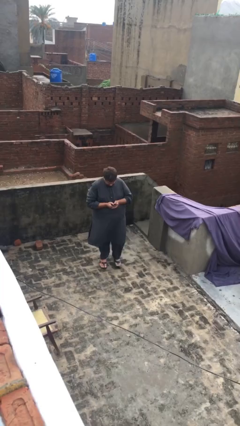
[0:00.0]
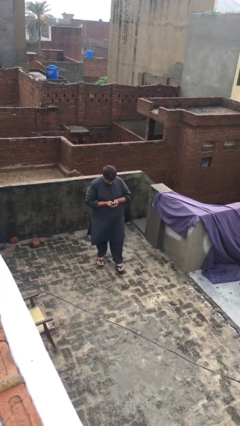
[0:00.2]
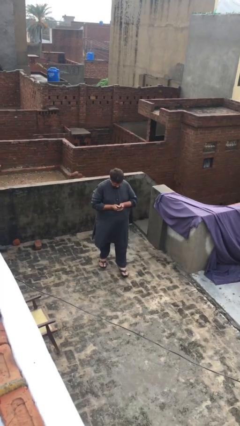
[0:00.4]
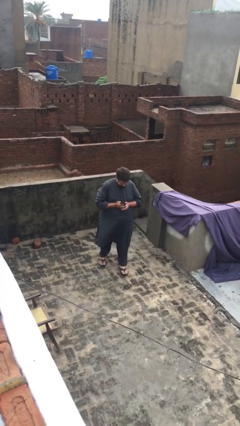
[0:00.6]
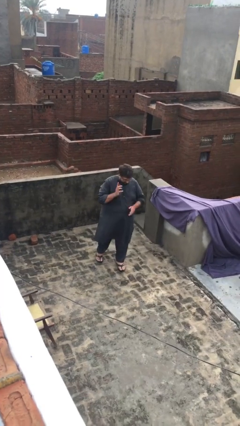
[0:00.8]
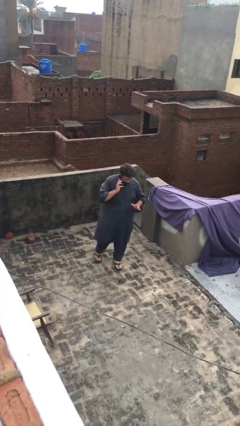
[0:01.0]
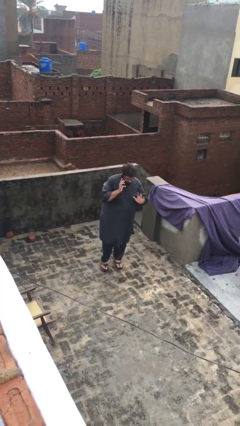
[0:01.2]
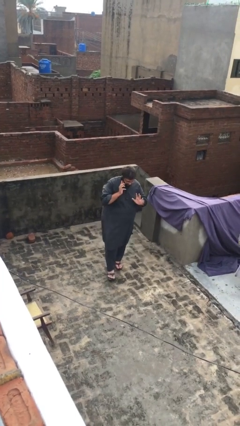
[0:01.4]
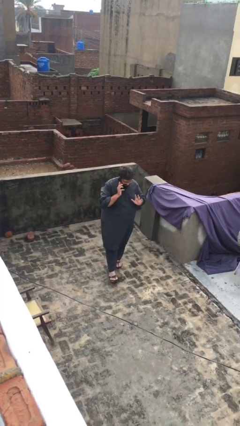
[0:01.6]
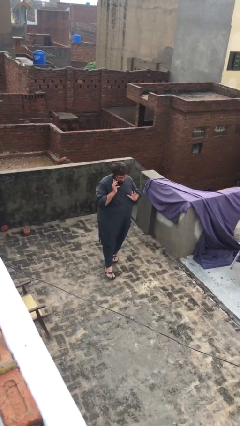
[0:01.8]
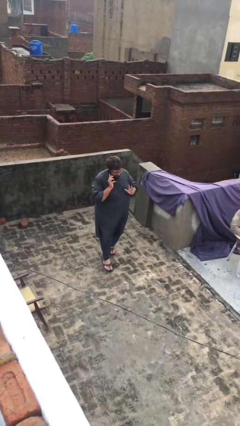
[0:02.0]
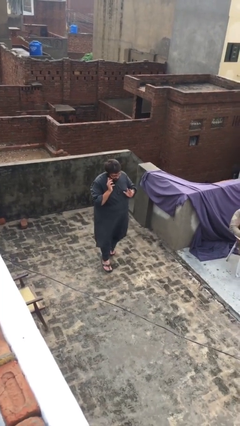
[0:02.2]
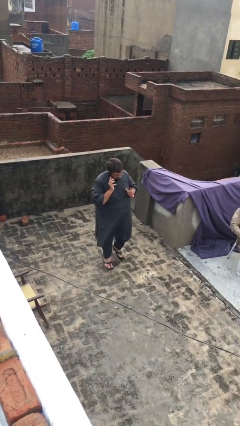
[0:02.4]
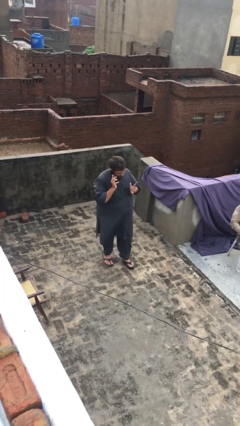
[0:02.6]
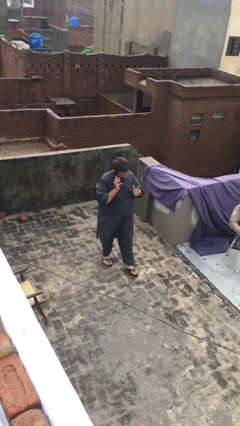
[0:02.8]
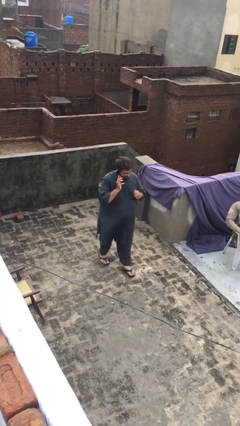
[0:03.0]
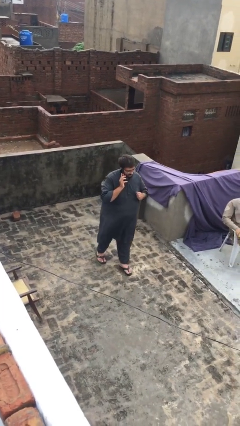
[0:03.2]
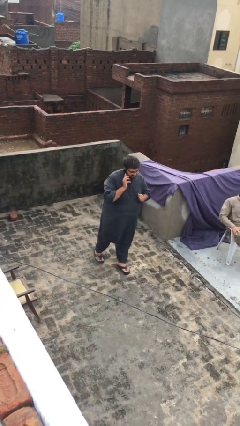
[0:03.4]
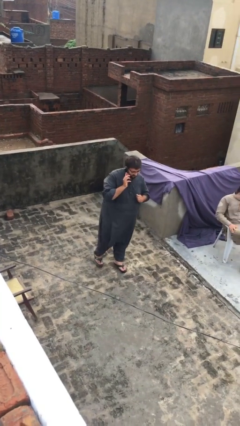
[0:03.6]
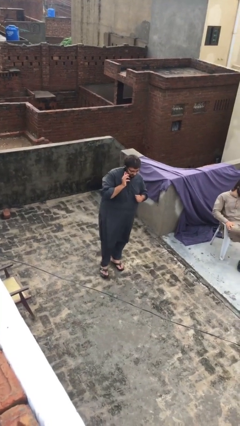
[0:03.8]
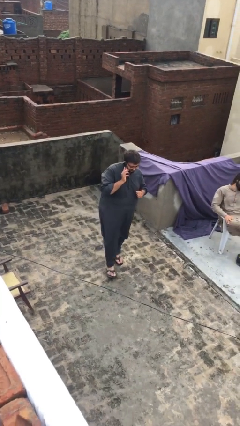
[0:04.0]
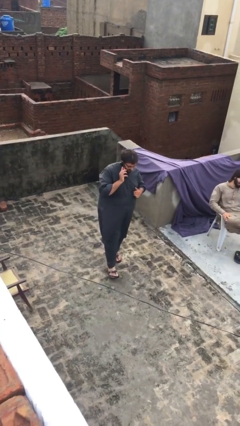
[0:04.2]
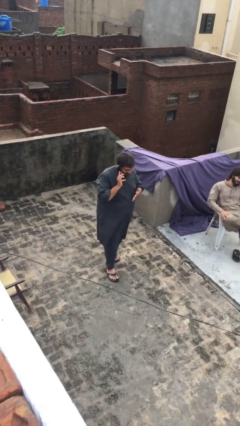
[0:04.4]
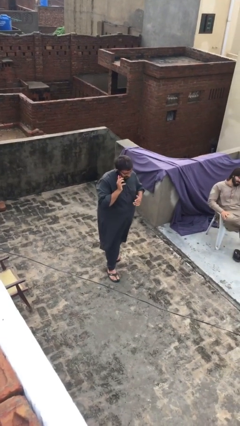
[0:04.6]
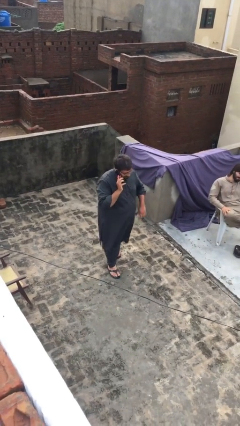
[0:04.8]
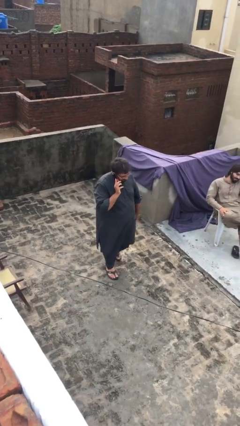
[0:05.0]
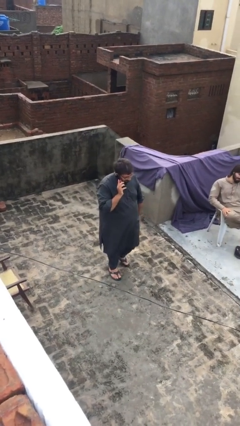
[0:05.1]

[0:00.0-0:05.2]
person talks on phone

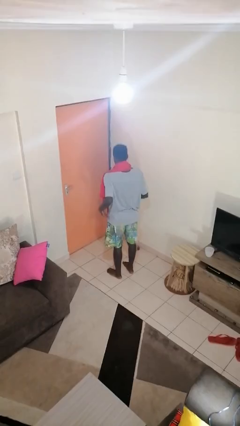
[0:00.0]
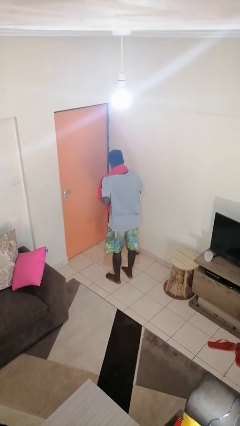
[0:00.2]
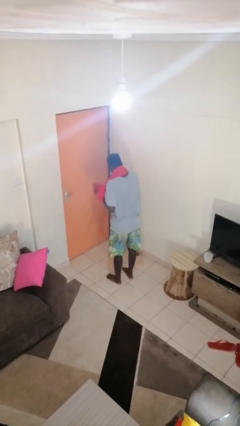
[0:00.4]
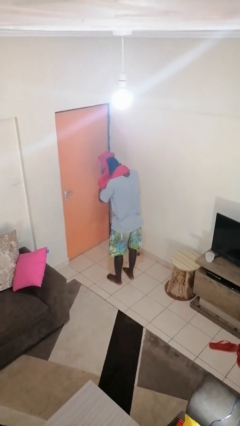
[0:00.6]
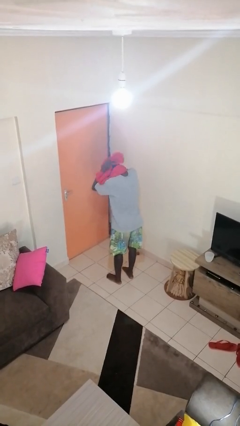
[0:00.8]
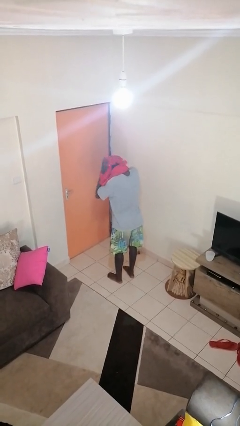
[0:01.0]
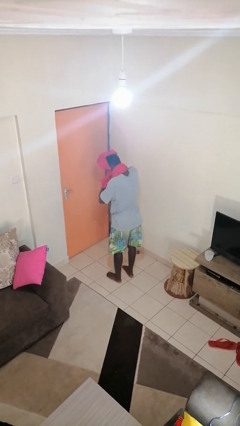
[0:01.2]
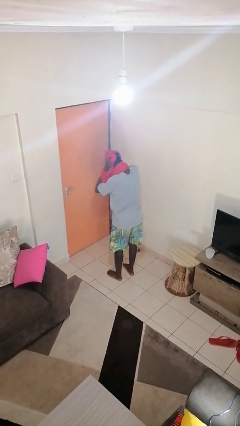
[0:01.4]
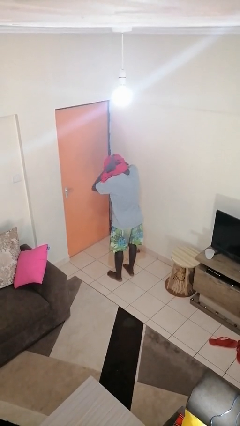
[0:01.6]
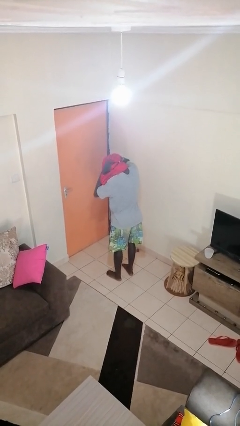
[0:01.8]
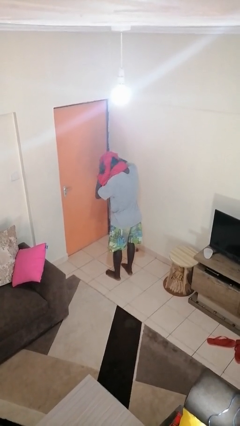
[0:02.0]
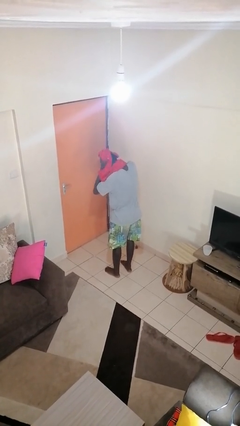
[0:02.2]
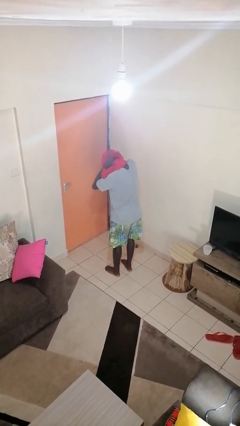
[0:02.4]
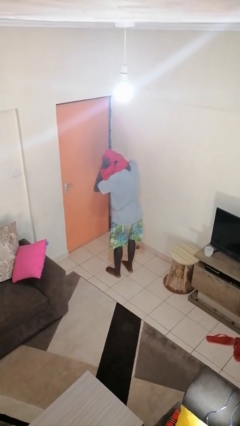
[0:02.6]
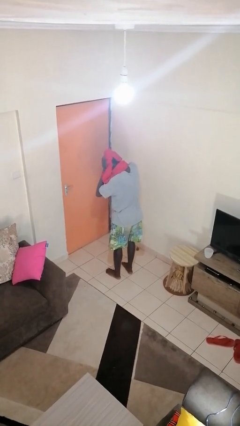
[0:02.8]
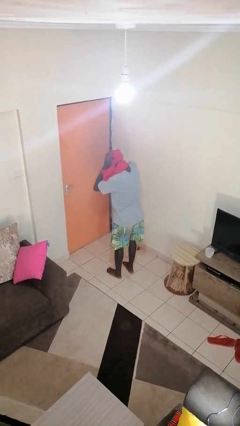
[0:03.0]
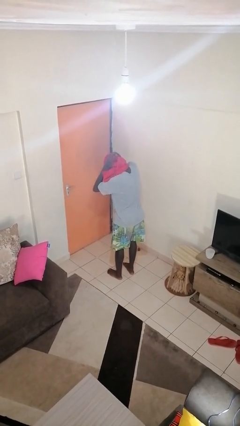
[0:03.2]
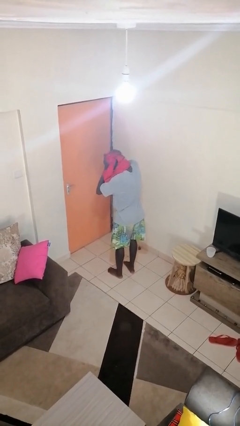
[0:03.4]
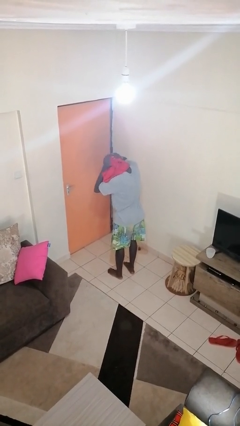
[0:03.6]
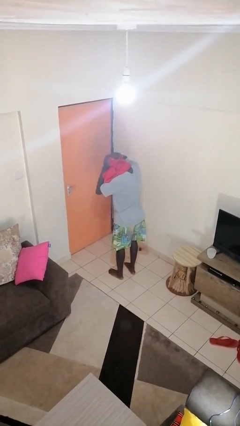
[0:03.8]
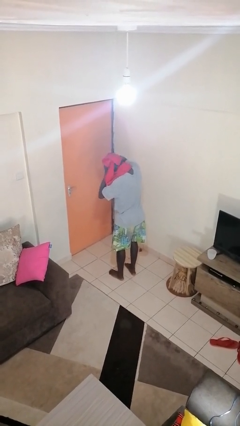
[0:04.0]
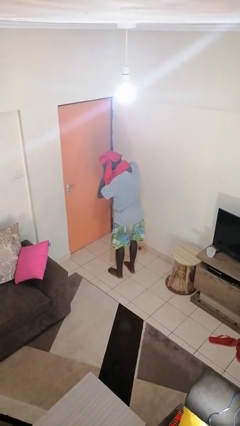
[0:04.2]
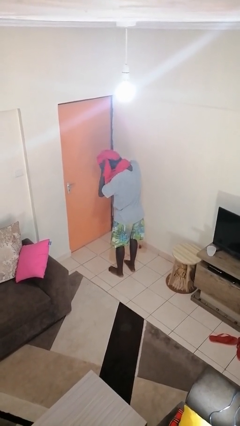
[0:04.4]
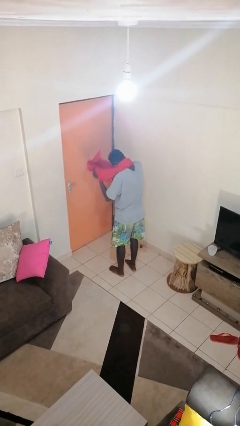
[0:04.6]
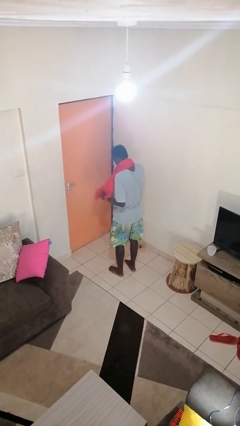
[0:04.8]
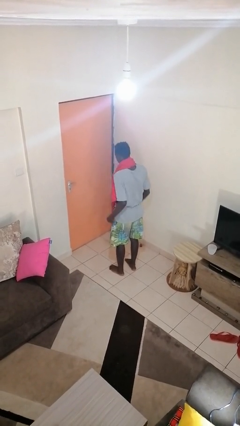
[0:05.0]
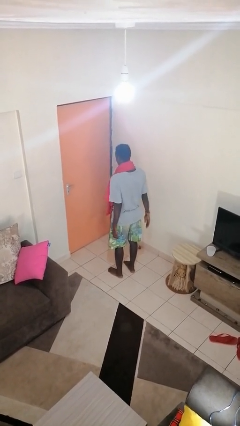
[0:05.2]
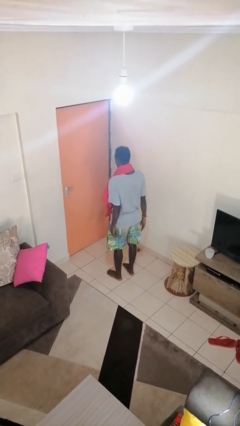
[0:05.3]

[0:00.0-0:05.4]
person dries hair with towel

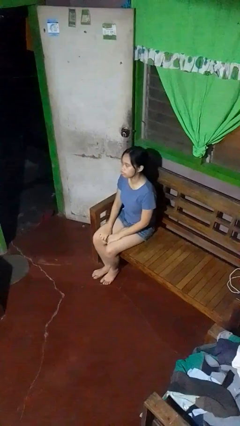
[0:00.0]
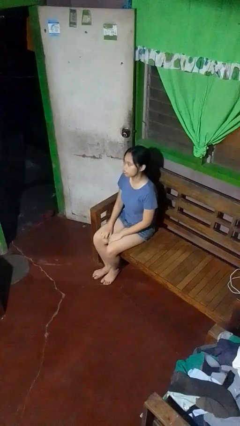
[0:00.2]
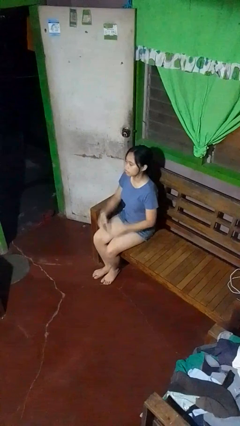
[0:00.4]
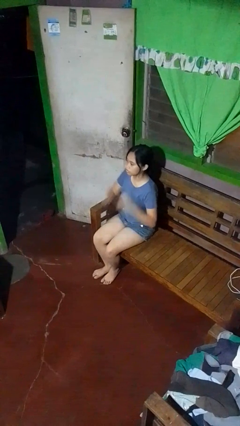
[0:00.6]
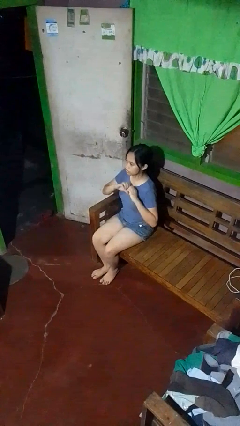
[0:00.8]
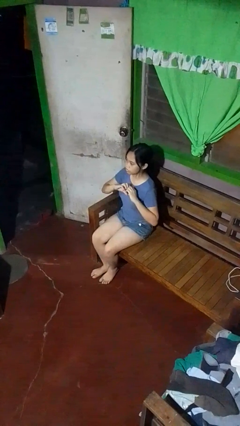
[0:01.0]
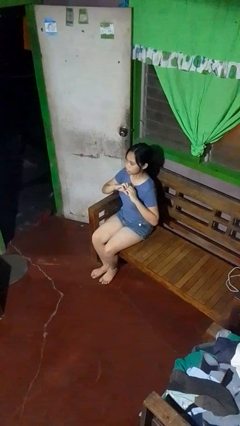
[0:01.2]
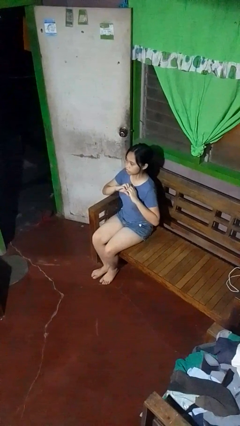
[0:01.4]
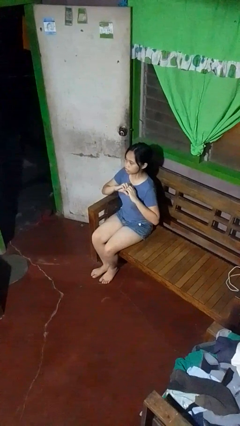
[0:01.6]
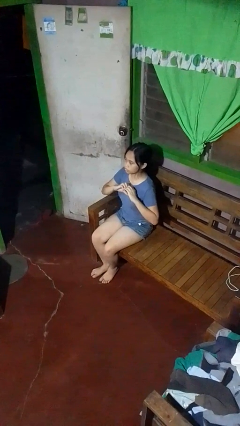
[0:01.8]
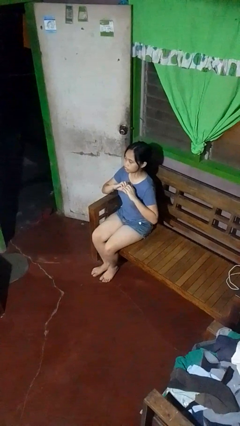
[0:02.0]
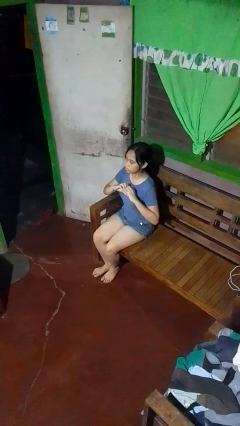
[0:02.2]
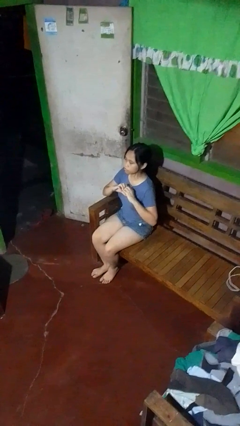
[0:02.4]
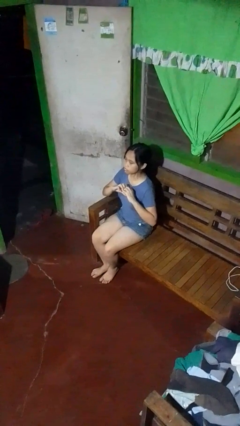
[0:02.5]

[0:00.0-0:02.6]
person gestures heart

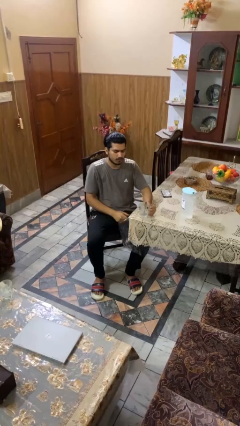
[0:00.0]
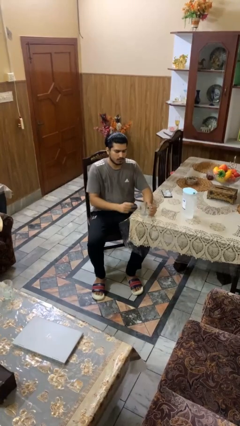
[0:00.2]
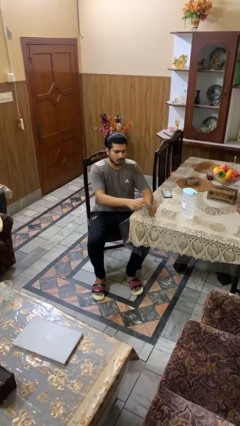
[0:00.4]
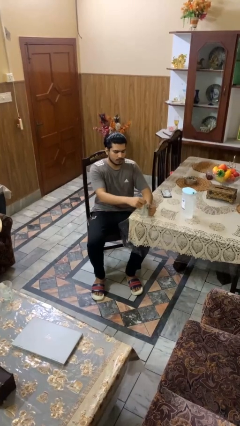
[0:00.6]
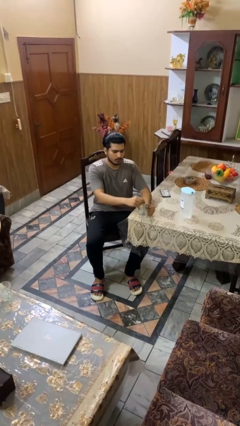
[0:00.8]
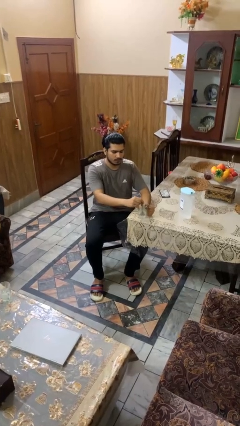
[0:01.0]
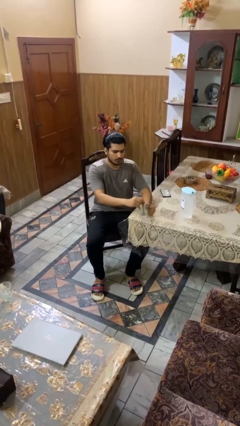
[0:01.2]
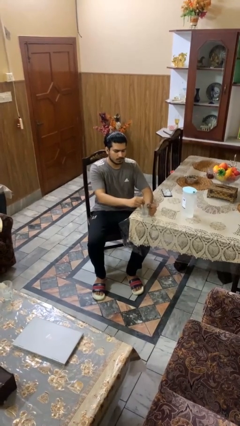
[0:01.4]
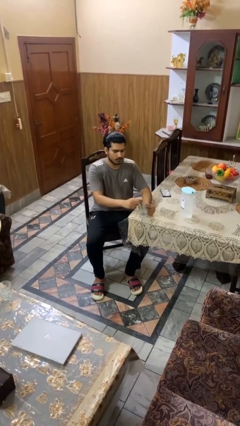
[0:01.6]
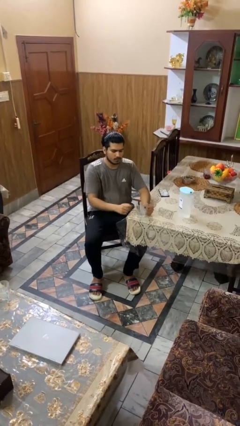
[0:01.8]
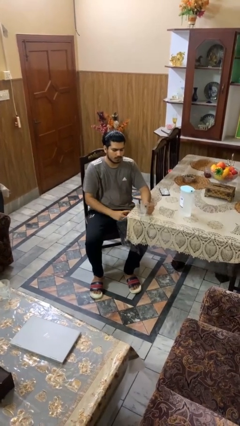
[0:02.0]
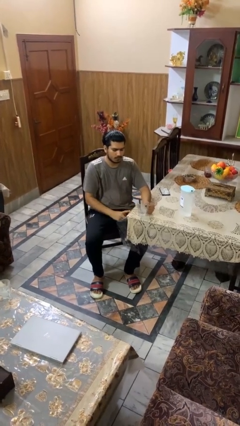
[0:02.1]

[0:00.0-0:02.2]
person stirs mug

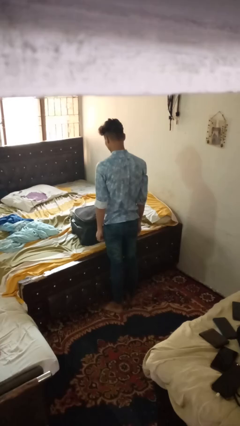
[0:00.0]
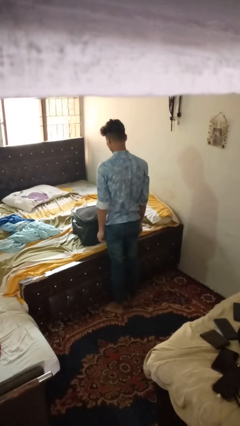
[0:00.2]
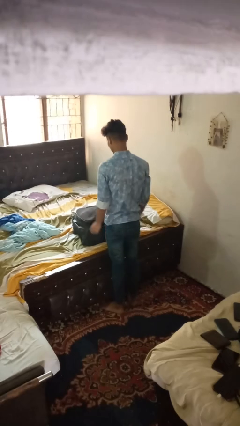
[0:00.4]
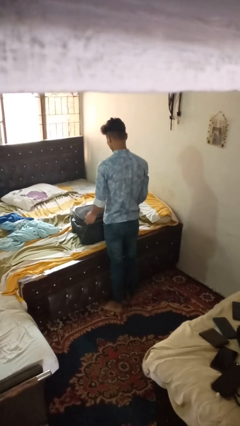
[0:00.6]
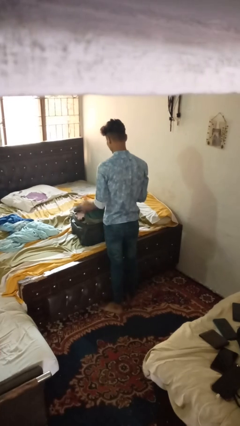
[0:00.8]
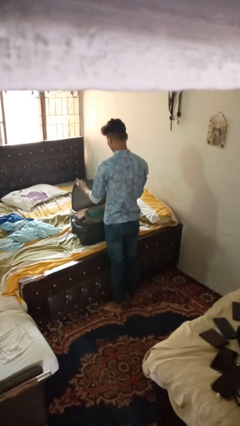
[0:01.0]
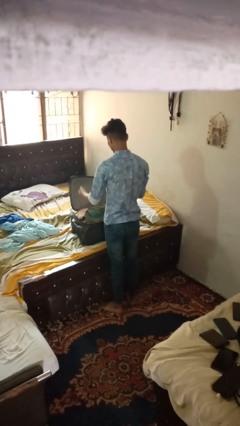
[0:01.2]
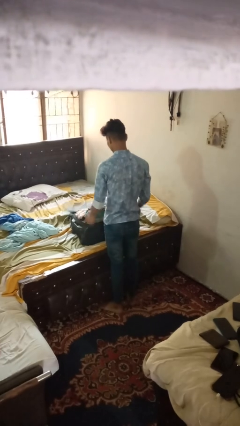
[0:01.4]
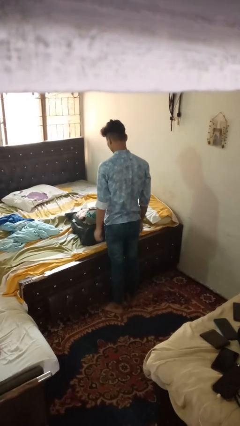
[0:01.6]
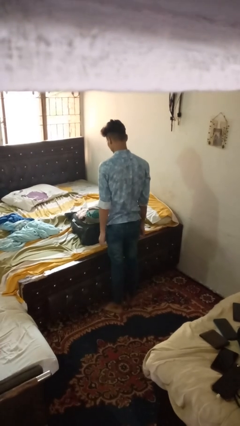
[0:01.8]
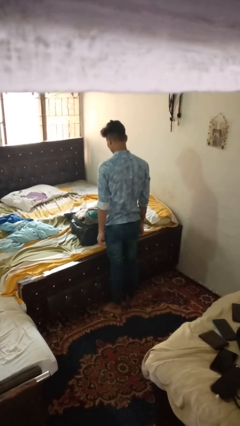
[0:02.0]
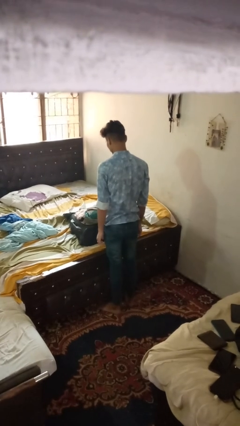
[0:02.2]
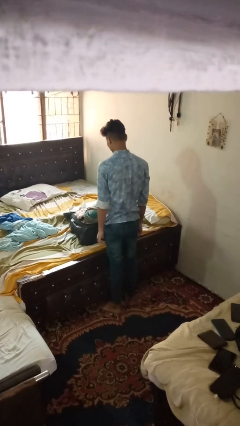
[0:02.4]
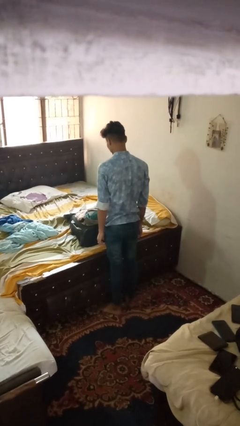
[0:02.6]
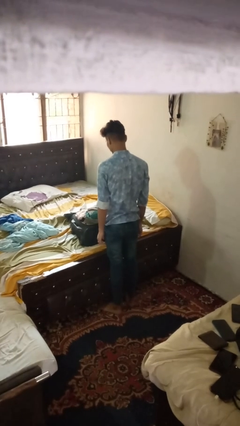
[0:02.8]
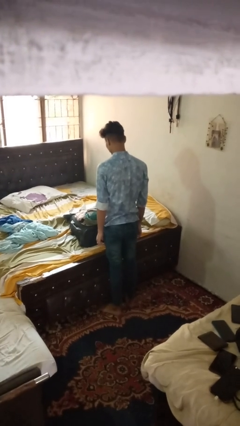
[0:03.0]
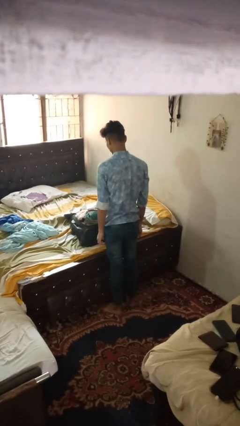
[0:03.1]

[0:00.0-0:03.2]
person opens suitcase
